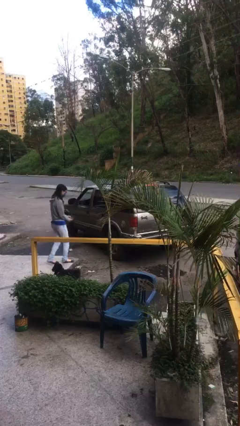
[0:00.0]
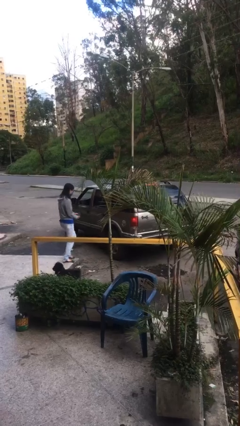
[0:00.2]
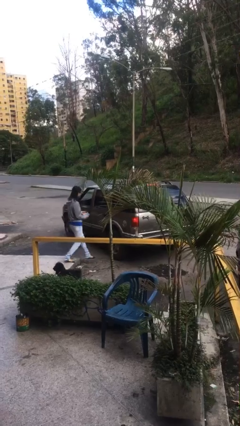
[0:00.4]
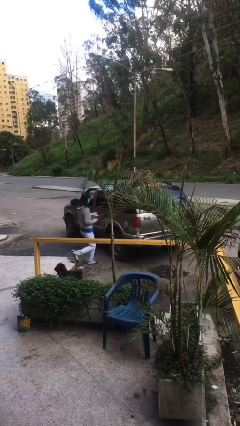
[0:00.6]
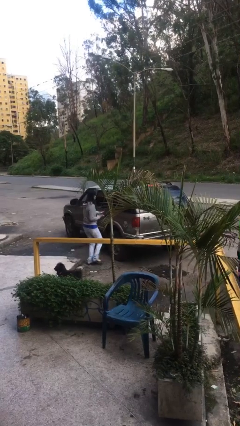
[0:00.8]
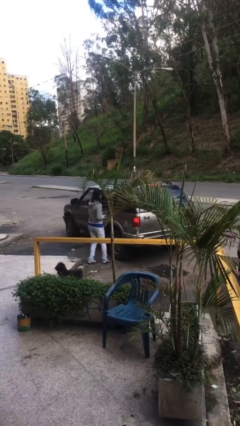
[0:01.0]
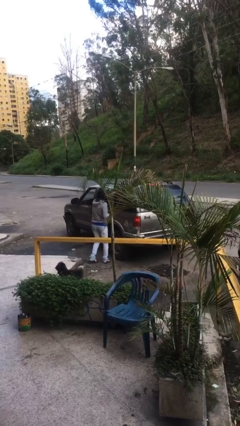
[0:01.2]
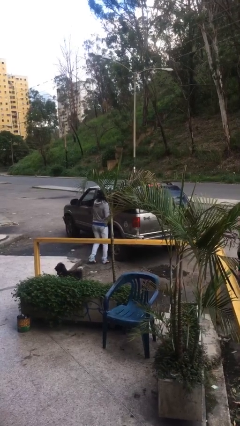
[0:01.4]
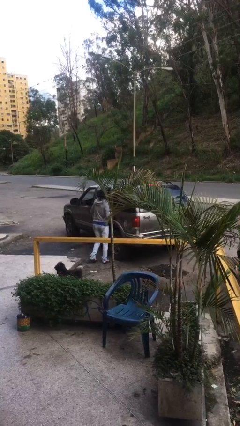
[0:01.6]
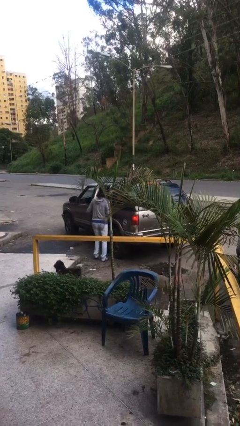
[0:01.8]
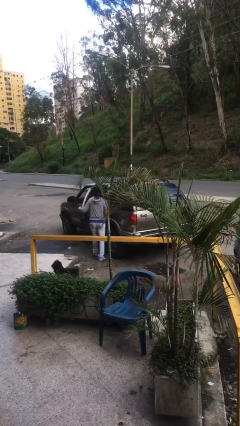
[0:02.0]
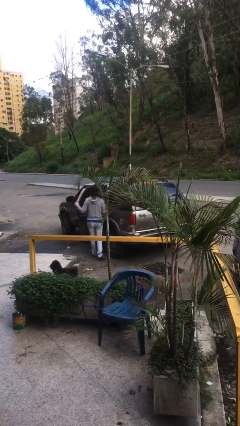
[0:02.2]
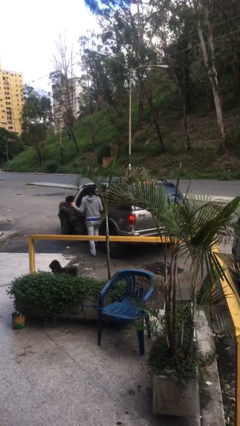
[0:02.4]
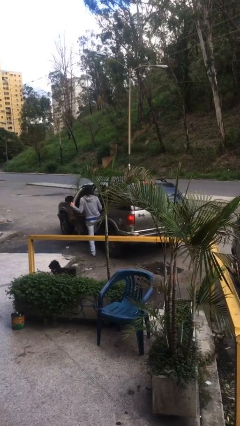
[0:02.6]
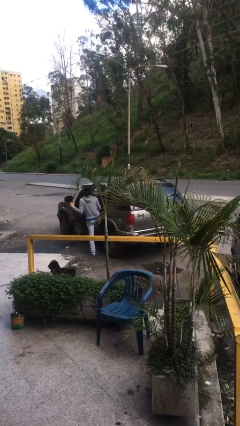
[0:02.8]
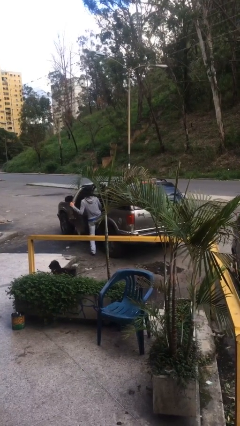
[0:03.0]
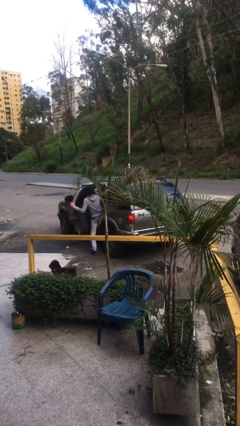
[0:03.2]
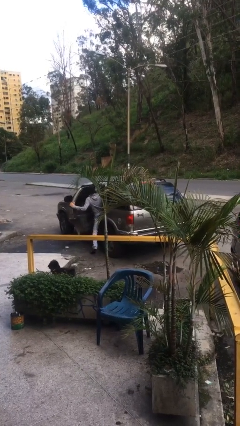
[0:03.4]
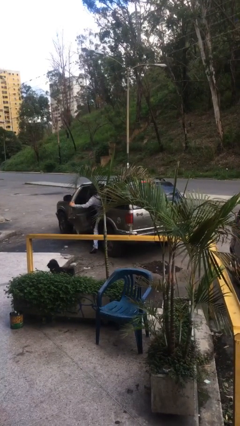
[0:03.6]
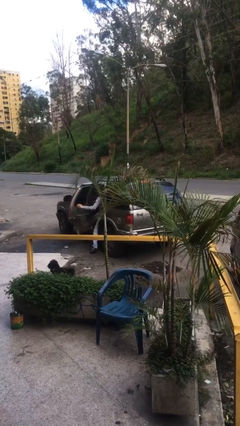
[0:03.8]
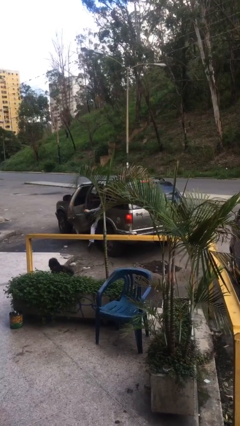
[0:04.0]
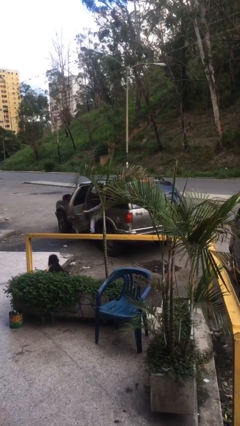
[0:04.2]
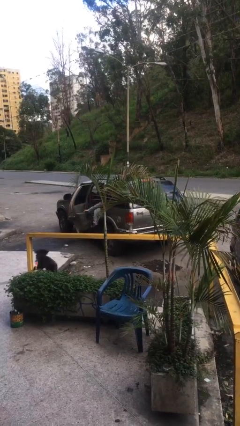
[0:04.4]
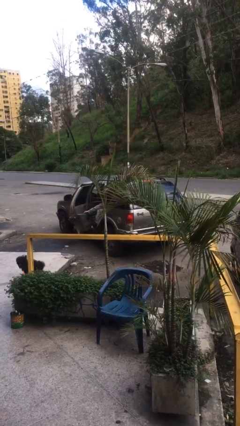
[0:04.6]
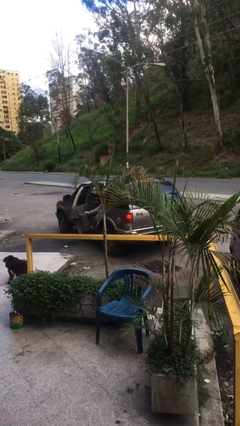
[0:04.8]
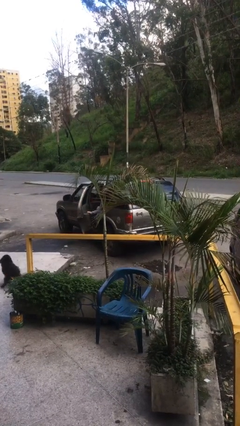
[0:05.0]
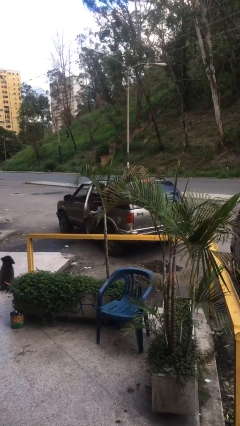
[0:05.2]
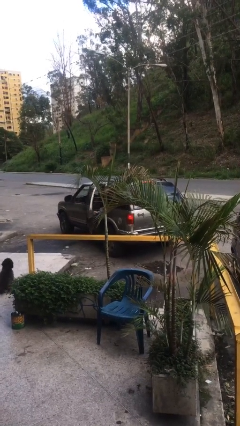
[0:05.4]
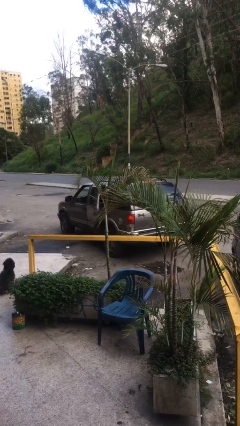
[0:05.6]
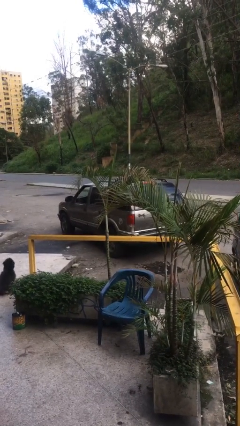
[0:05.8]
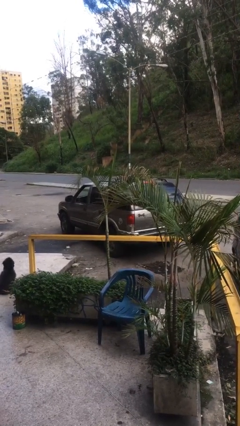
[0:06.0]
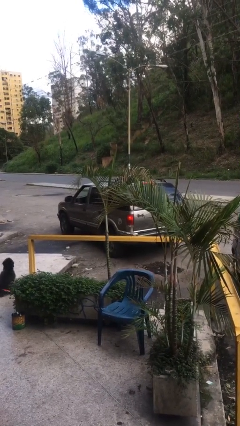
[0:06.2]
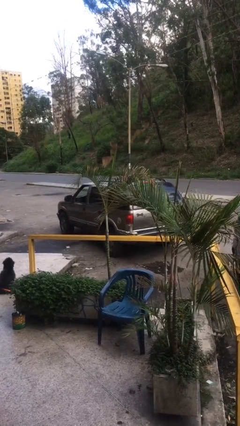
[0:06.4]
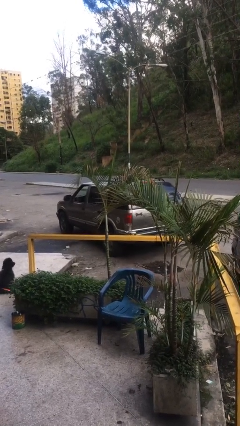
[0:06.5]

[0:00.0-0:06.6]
car picks up person

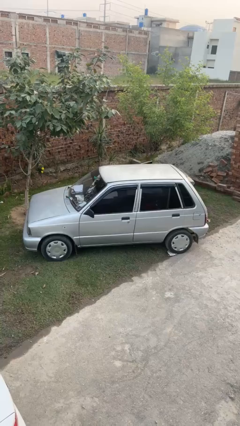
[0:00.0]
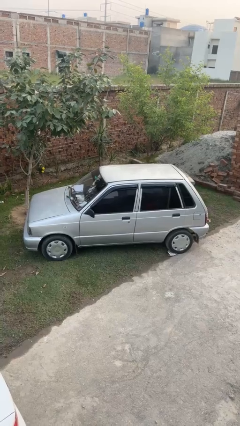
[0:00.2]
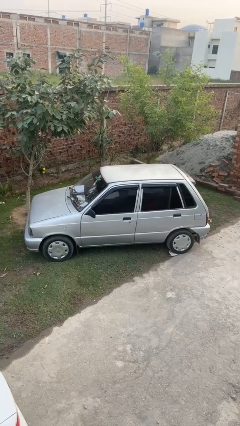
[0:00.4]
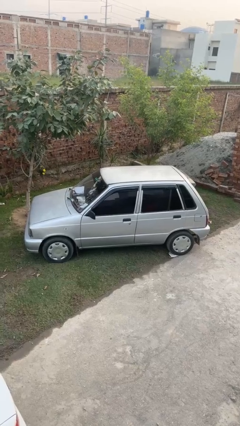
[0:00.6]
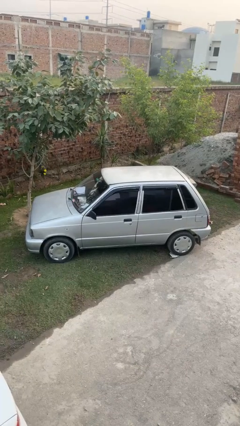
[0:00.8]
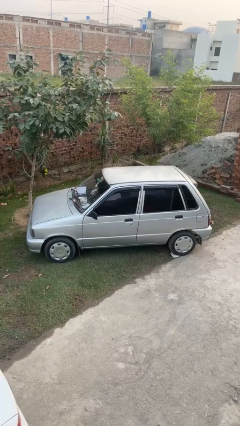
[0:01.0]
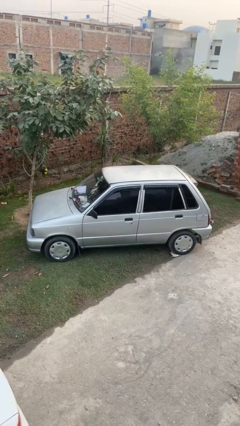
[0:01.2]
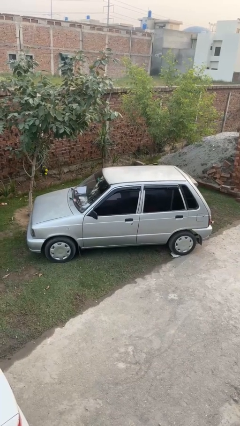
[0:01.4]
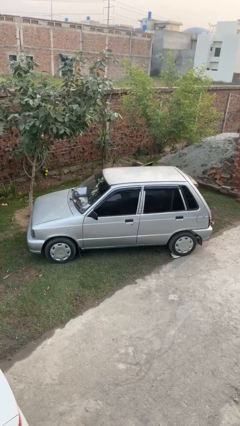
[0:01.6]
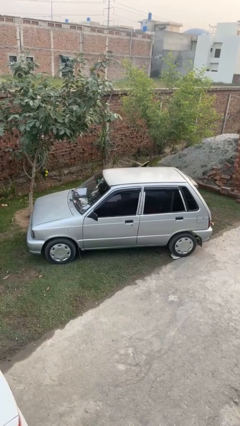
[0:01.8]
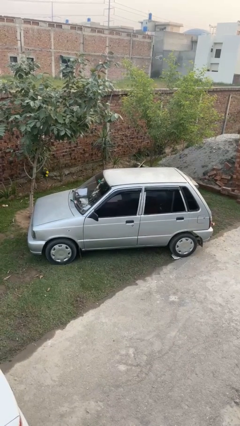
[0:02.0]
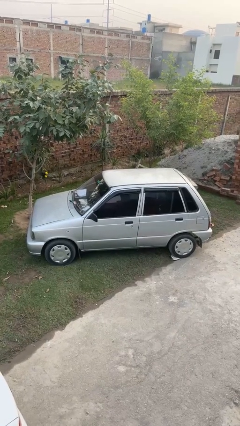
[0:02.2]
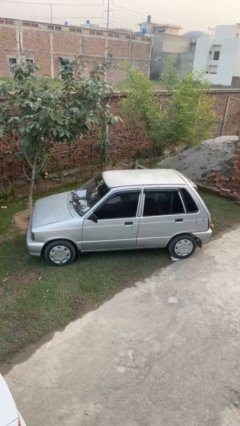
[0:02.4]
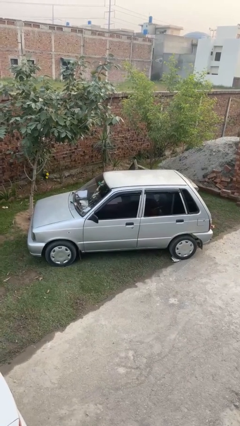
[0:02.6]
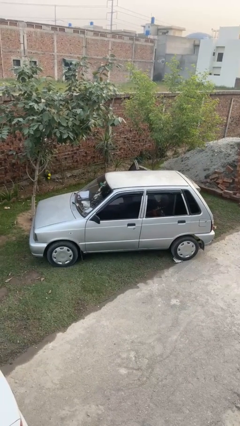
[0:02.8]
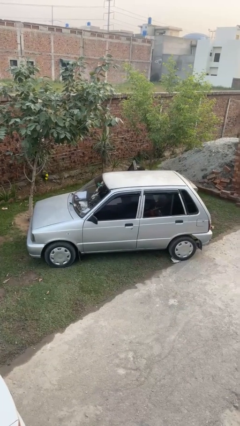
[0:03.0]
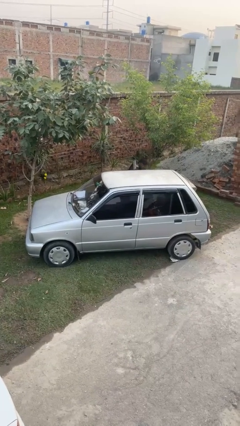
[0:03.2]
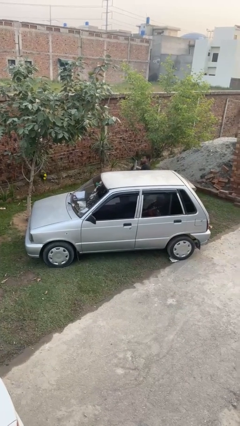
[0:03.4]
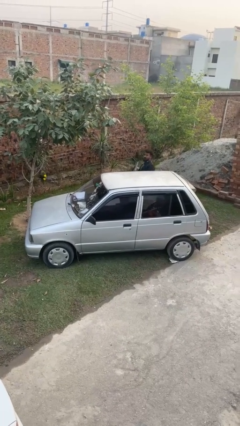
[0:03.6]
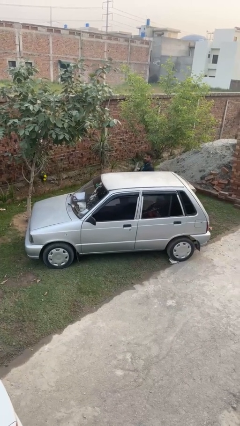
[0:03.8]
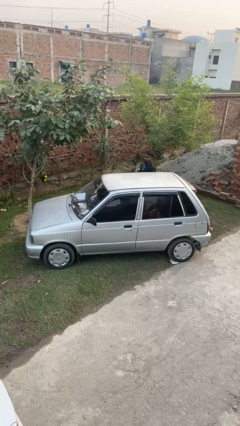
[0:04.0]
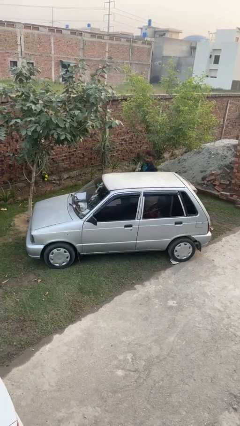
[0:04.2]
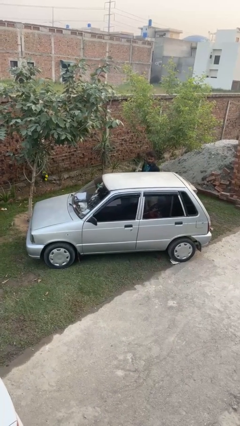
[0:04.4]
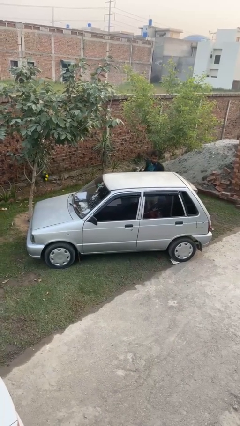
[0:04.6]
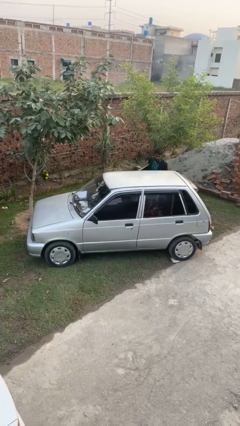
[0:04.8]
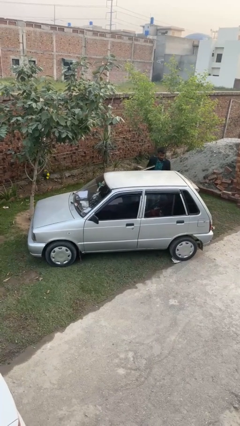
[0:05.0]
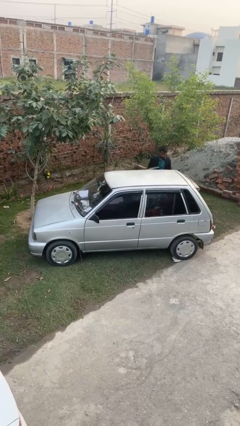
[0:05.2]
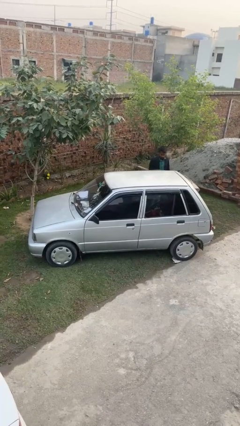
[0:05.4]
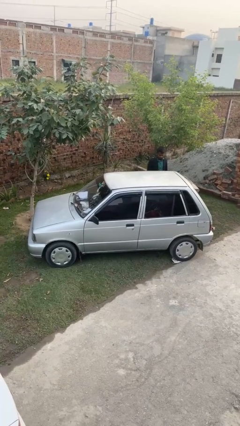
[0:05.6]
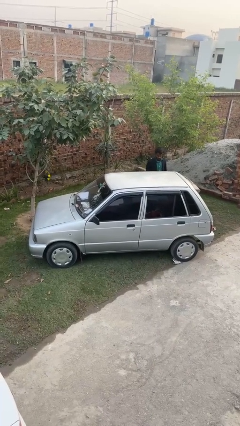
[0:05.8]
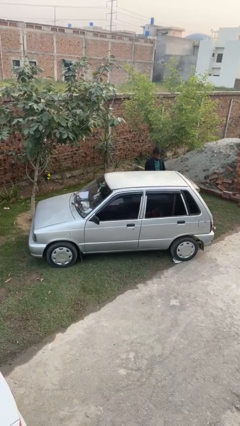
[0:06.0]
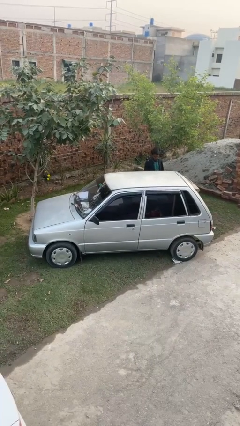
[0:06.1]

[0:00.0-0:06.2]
car drops off person

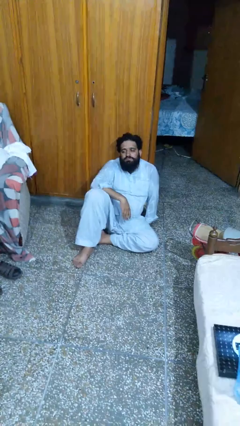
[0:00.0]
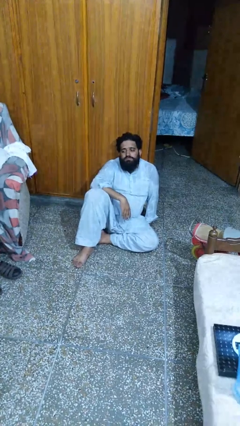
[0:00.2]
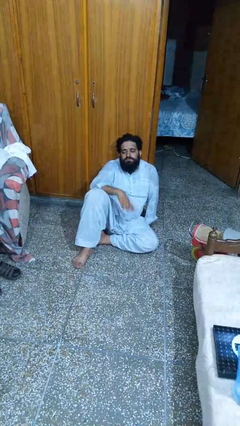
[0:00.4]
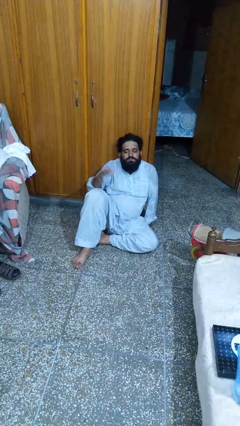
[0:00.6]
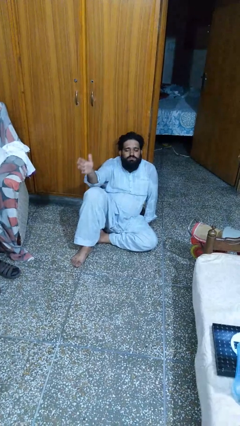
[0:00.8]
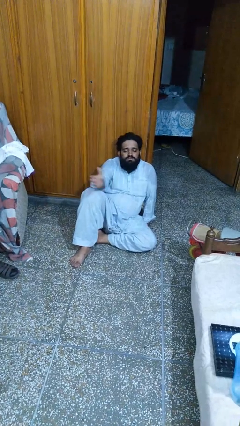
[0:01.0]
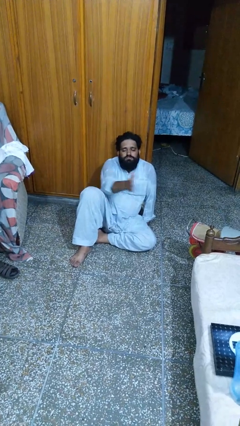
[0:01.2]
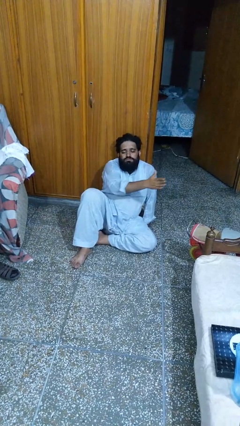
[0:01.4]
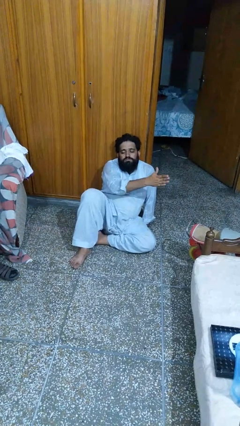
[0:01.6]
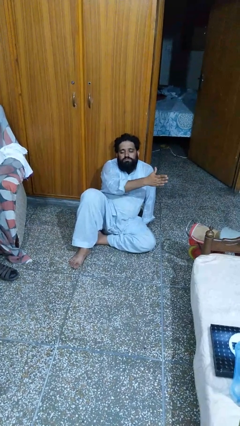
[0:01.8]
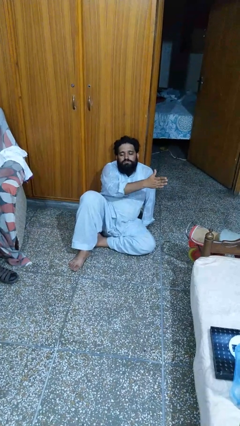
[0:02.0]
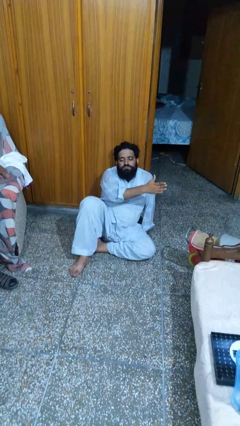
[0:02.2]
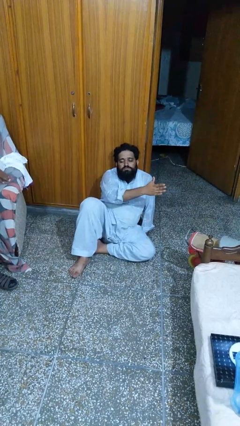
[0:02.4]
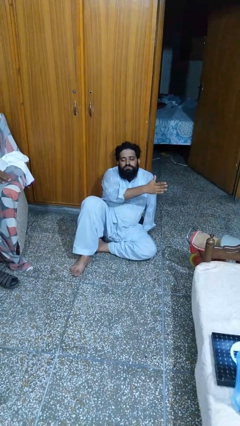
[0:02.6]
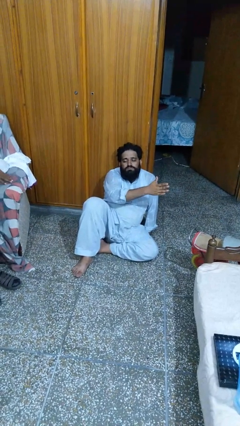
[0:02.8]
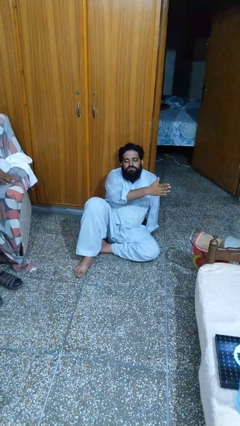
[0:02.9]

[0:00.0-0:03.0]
person gestures swipe left

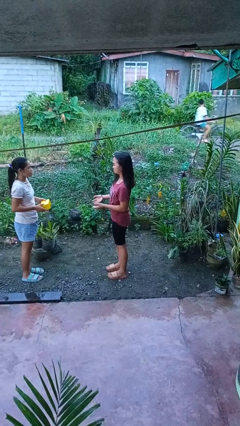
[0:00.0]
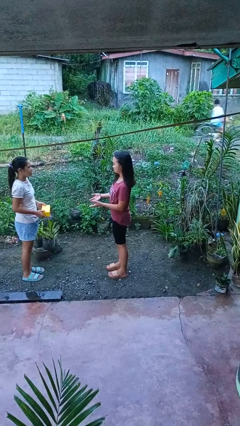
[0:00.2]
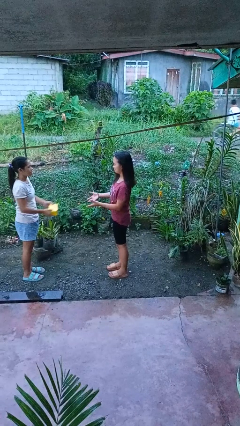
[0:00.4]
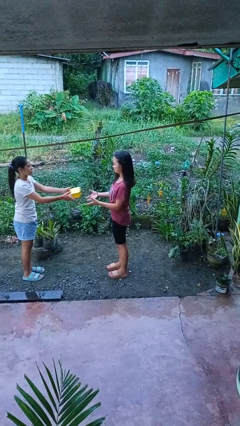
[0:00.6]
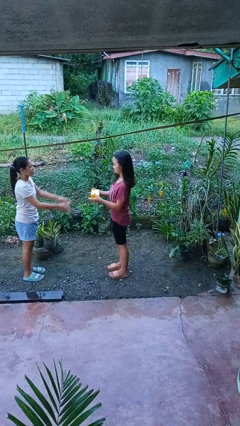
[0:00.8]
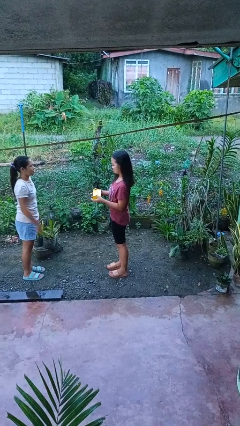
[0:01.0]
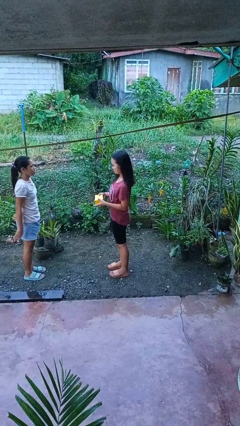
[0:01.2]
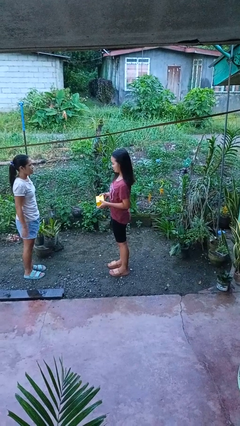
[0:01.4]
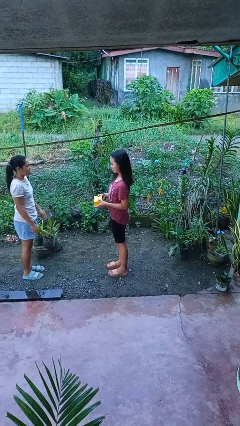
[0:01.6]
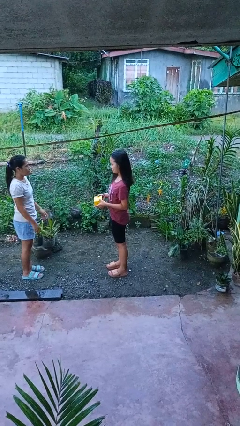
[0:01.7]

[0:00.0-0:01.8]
person catches object from person

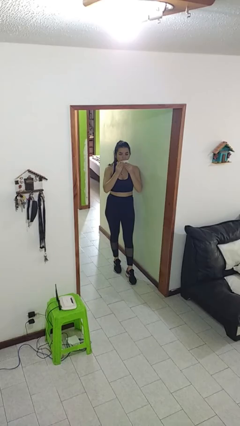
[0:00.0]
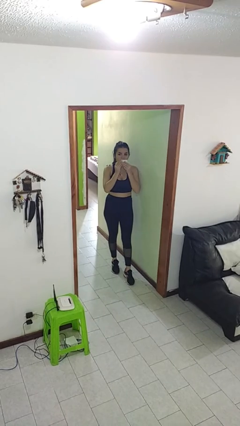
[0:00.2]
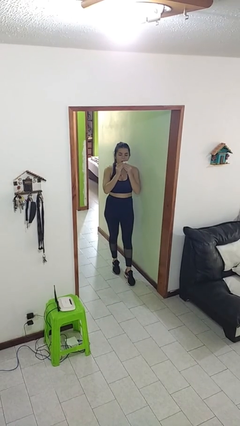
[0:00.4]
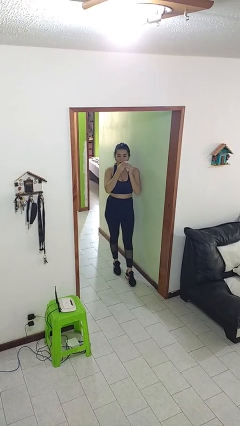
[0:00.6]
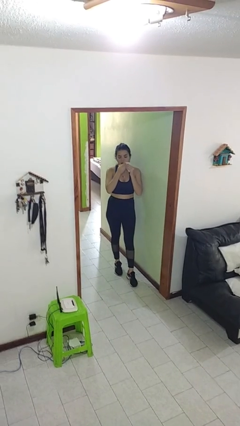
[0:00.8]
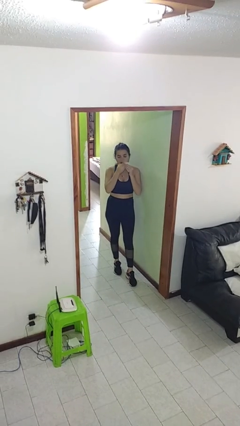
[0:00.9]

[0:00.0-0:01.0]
person wipes mouth with napkin
